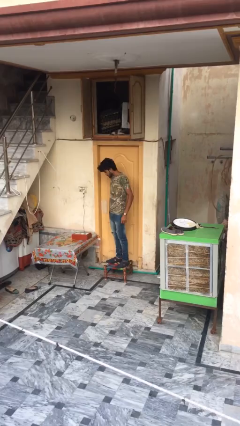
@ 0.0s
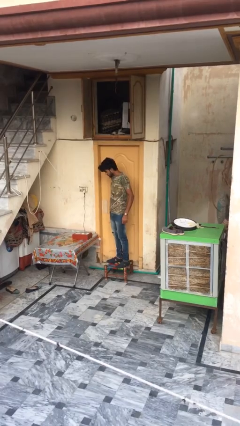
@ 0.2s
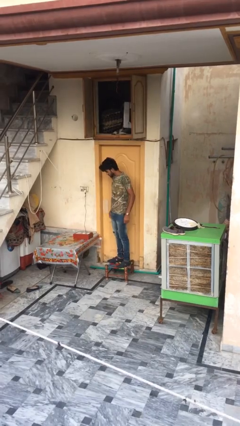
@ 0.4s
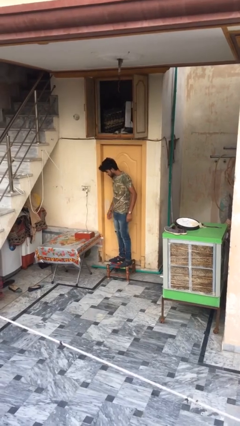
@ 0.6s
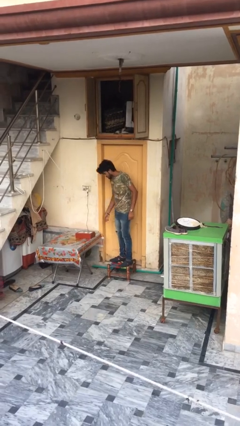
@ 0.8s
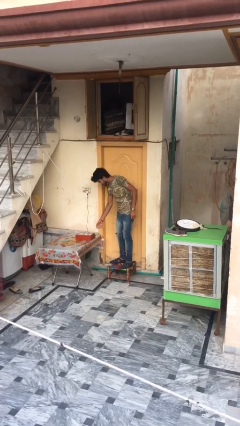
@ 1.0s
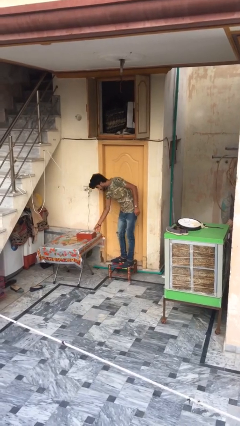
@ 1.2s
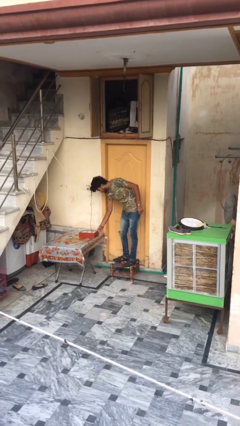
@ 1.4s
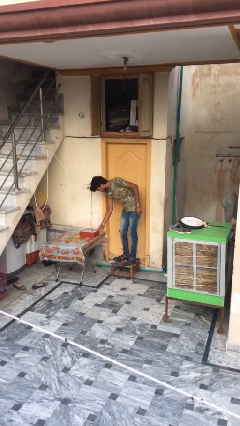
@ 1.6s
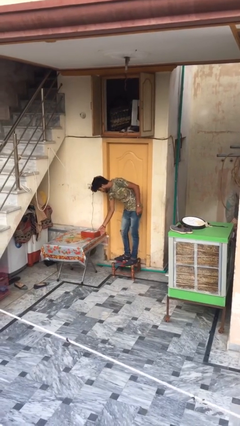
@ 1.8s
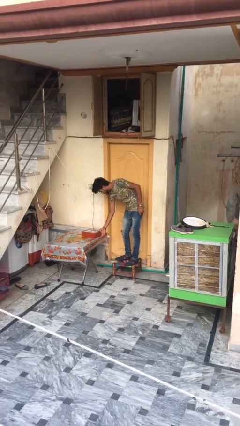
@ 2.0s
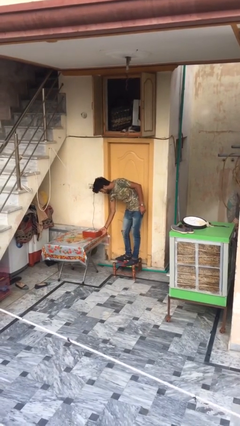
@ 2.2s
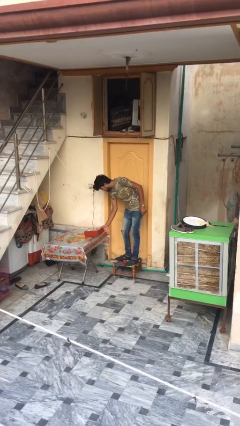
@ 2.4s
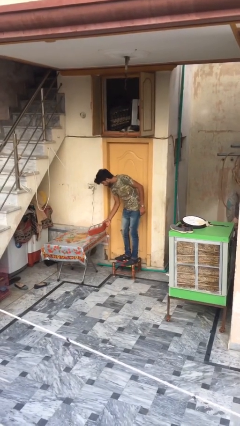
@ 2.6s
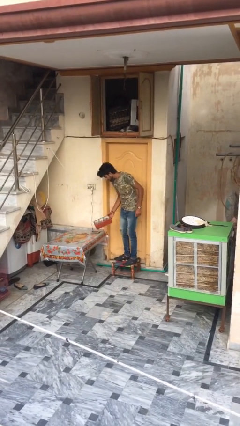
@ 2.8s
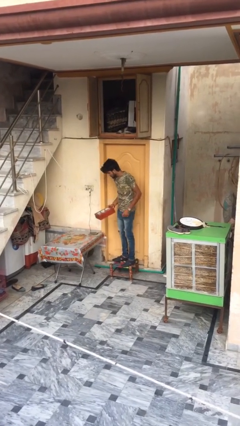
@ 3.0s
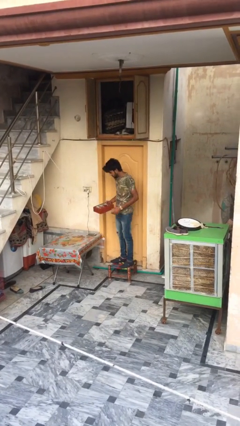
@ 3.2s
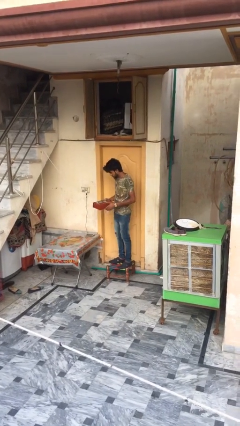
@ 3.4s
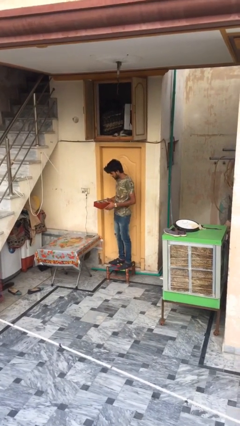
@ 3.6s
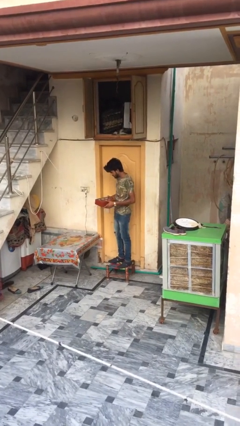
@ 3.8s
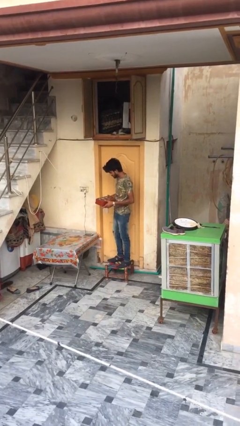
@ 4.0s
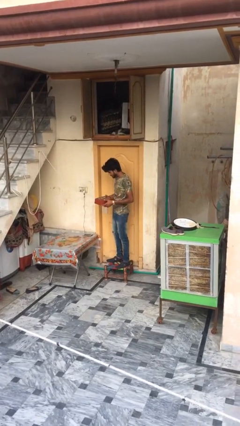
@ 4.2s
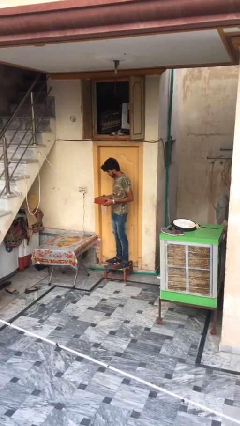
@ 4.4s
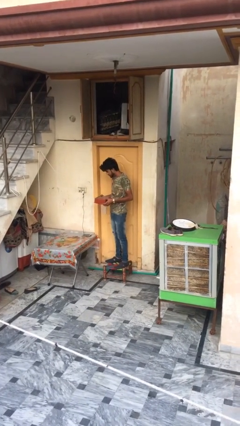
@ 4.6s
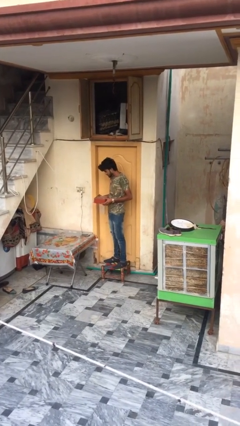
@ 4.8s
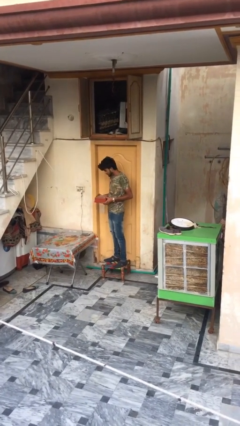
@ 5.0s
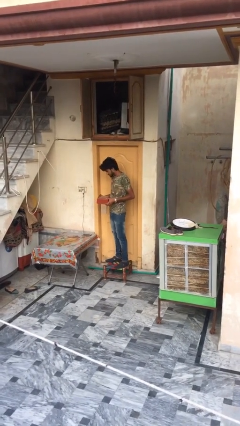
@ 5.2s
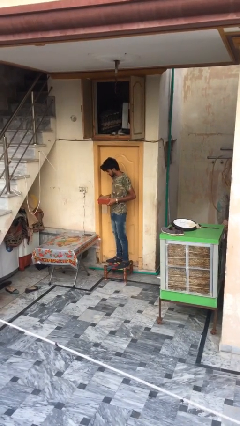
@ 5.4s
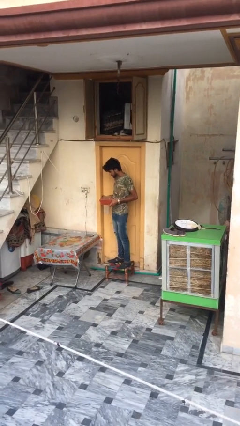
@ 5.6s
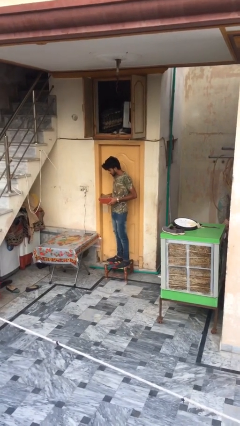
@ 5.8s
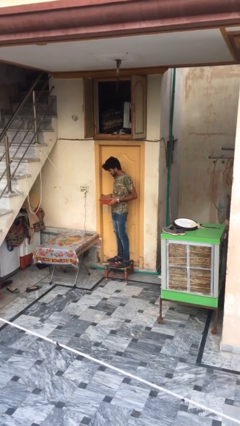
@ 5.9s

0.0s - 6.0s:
person picks up object from table

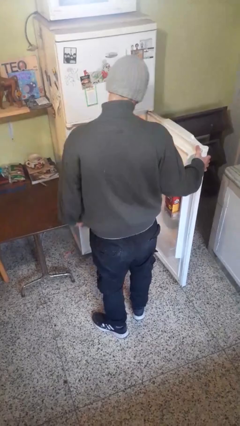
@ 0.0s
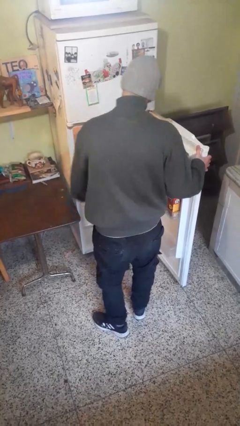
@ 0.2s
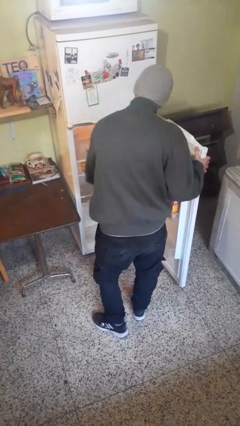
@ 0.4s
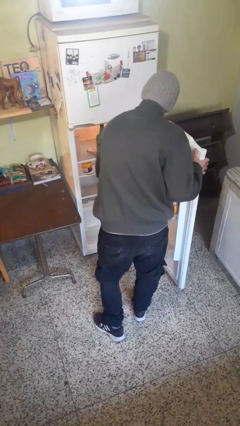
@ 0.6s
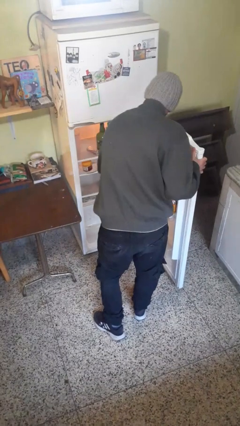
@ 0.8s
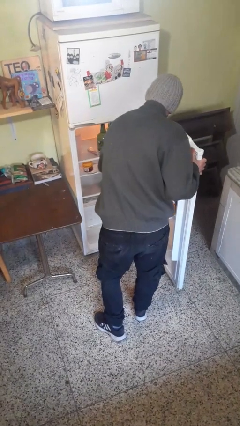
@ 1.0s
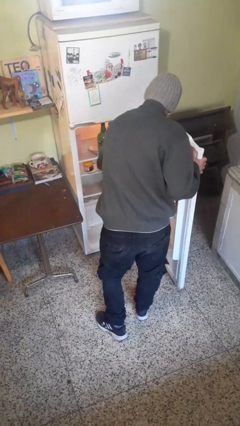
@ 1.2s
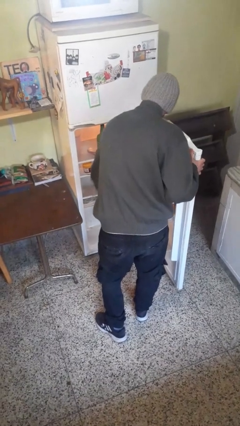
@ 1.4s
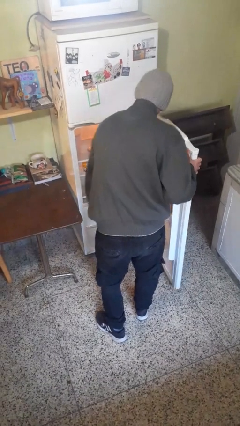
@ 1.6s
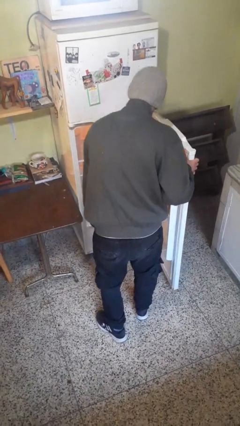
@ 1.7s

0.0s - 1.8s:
person puts object into refrigerator

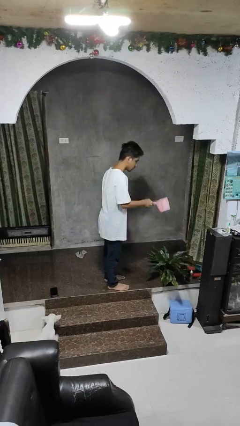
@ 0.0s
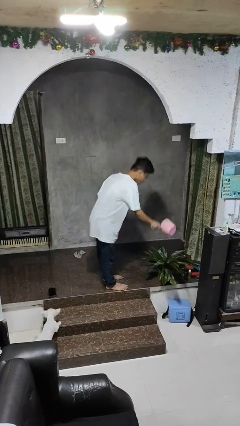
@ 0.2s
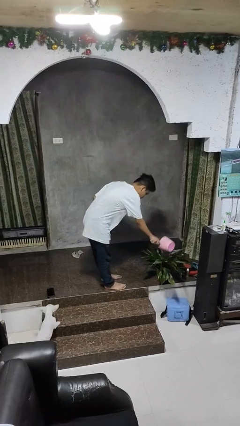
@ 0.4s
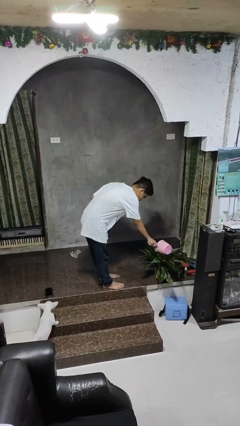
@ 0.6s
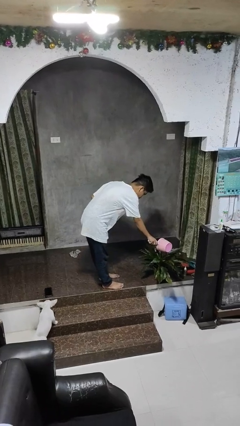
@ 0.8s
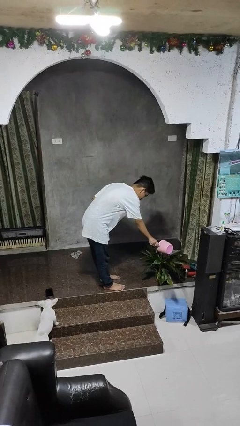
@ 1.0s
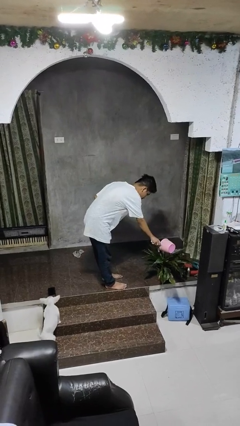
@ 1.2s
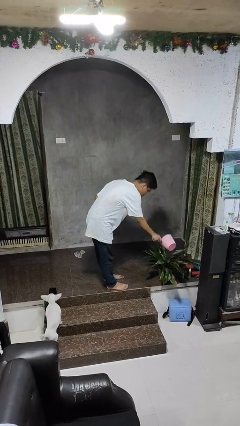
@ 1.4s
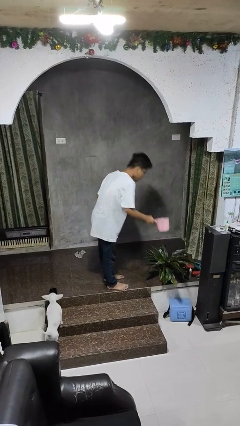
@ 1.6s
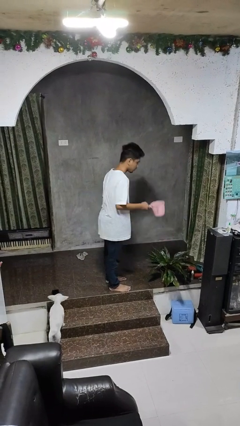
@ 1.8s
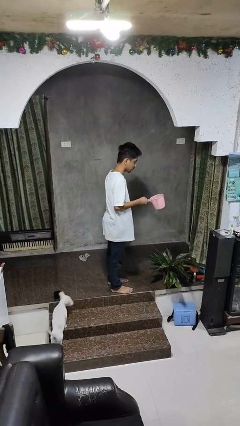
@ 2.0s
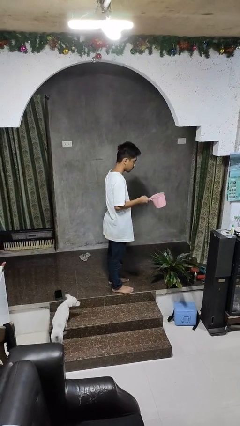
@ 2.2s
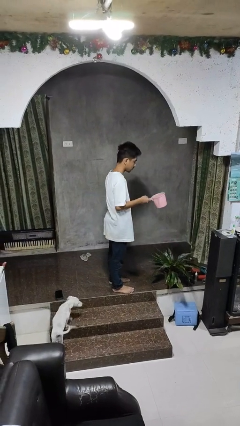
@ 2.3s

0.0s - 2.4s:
person waters houseplant

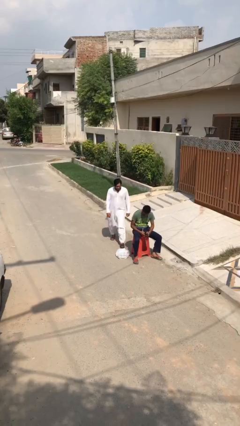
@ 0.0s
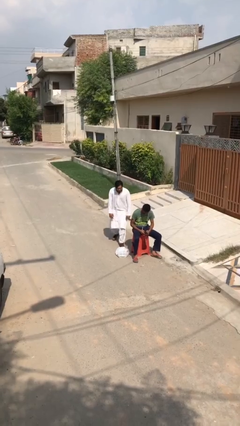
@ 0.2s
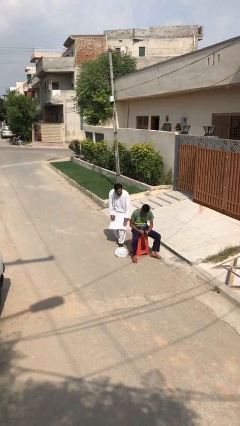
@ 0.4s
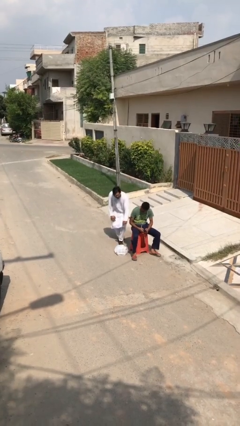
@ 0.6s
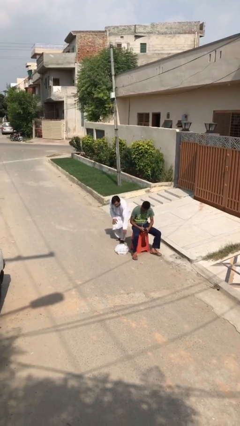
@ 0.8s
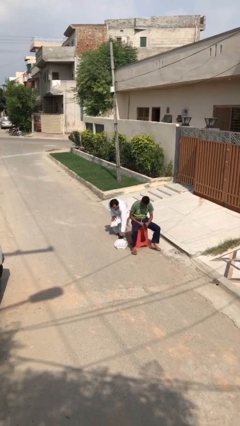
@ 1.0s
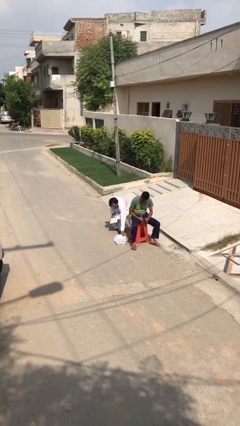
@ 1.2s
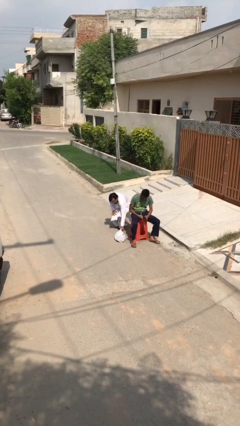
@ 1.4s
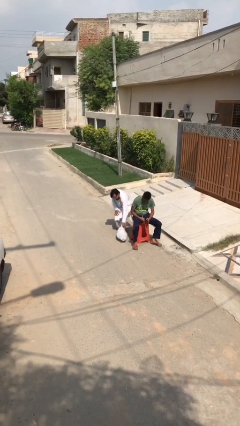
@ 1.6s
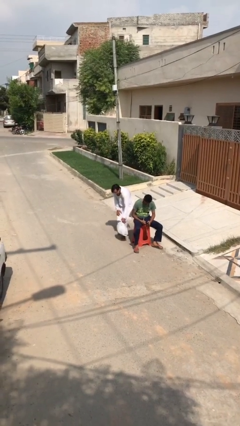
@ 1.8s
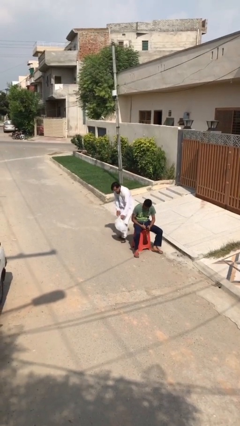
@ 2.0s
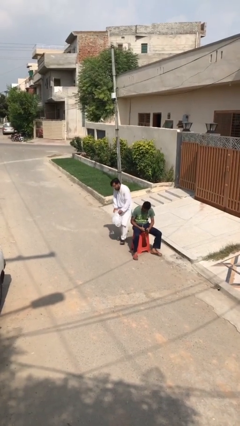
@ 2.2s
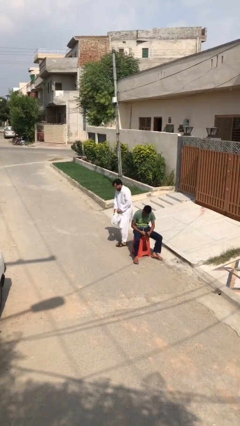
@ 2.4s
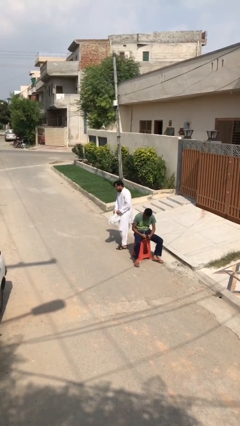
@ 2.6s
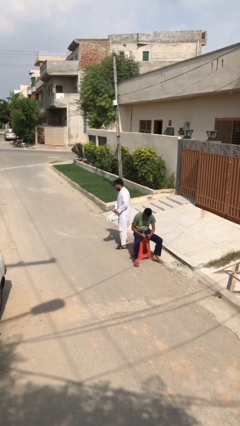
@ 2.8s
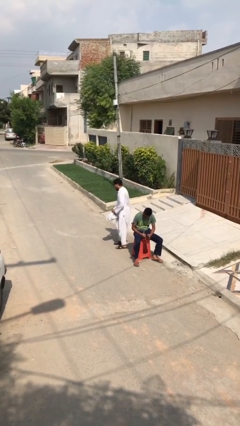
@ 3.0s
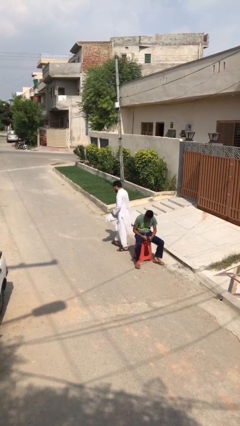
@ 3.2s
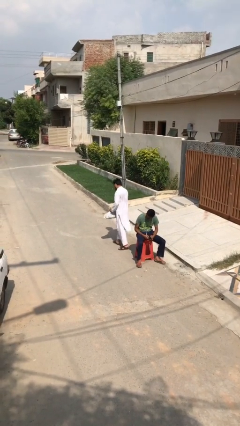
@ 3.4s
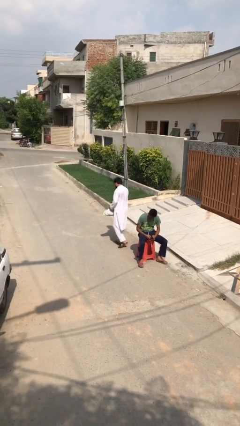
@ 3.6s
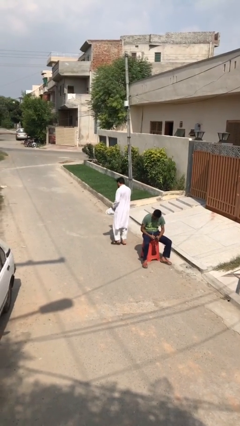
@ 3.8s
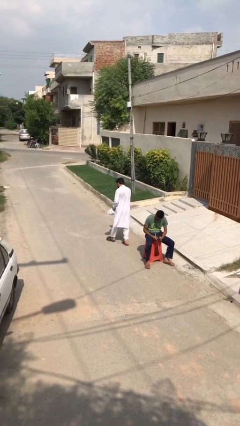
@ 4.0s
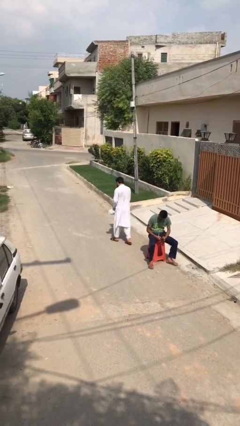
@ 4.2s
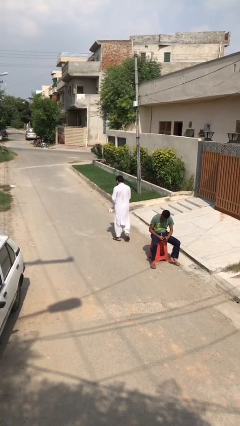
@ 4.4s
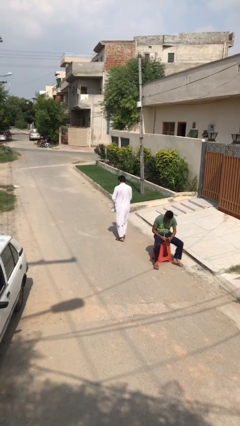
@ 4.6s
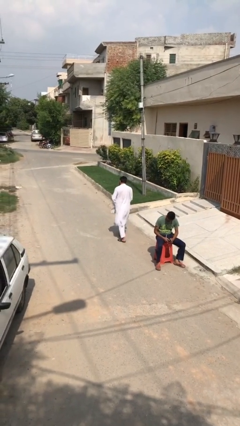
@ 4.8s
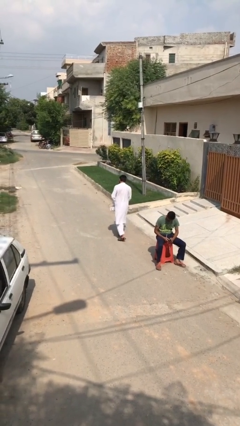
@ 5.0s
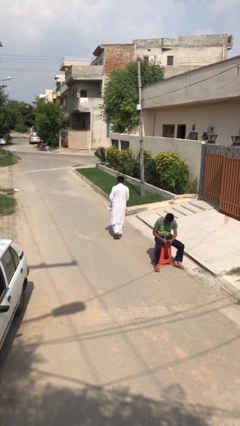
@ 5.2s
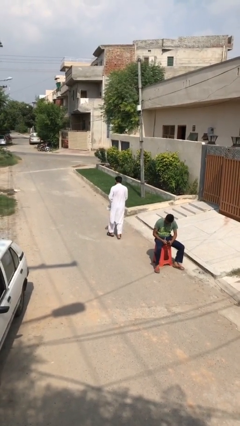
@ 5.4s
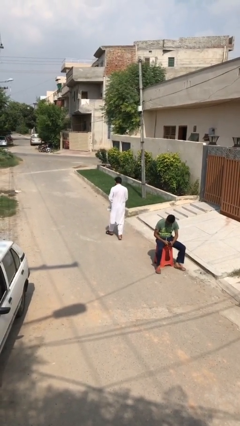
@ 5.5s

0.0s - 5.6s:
person steals object from person

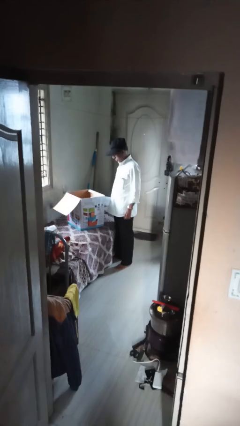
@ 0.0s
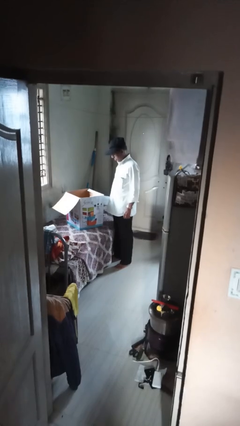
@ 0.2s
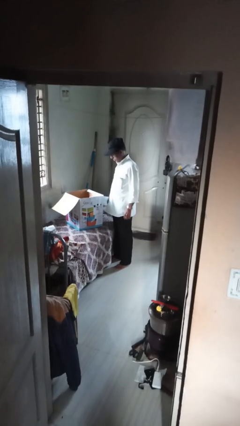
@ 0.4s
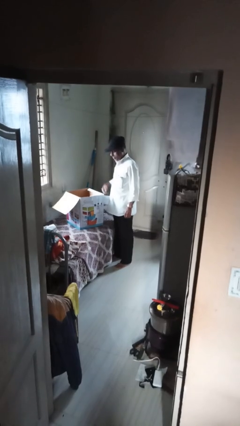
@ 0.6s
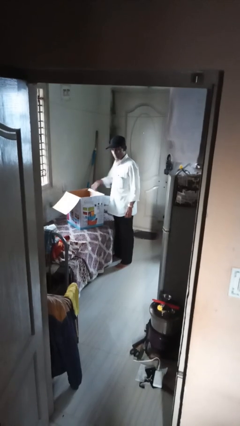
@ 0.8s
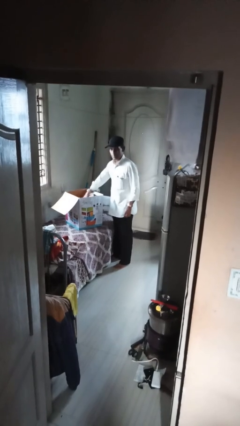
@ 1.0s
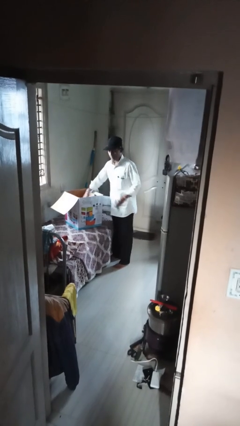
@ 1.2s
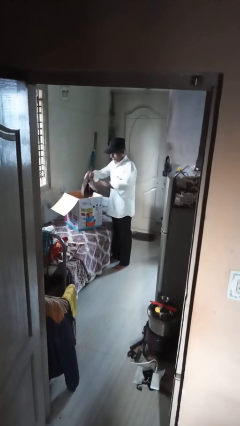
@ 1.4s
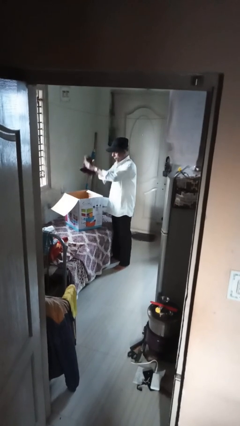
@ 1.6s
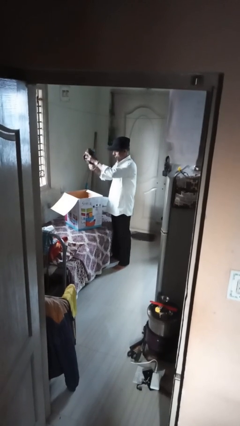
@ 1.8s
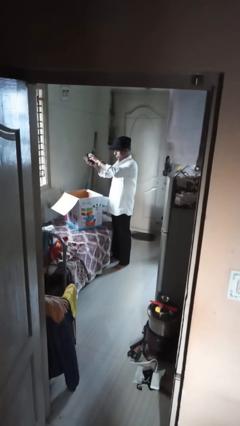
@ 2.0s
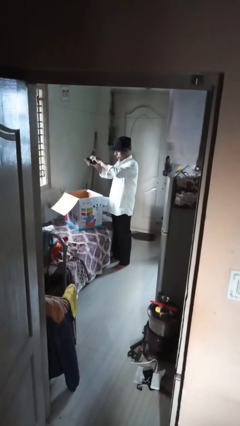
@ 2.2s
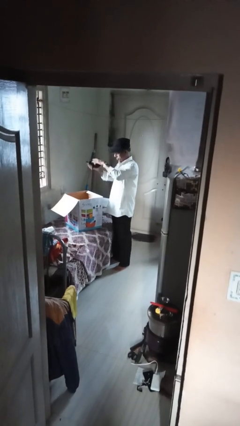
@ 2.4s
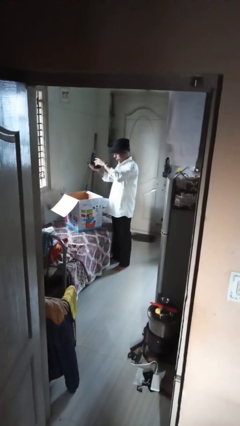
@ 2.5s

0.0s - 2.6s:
person takes object from box
